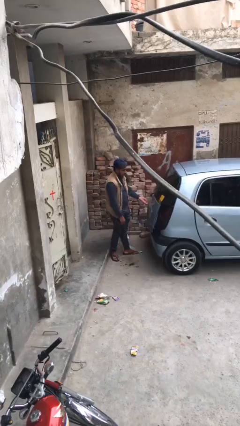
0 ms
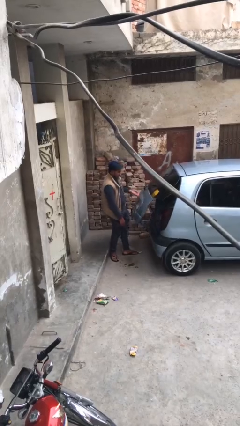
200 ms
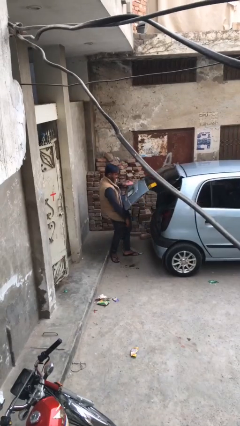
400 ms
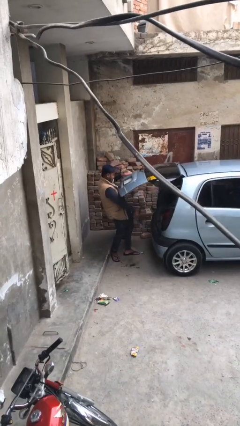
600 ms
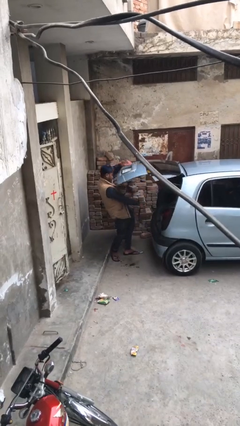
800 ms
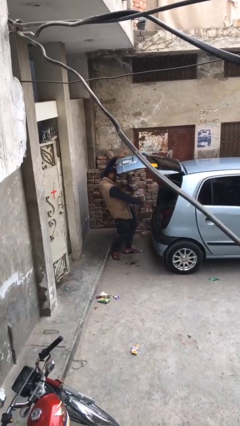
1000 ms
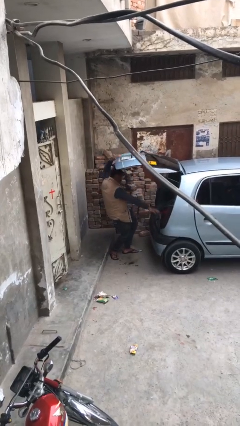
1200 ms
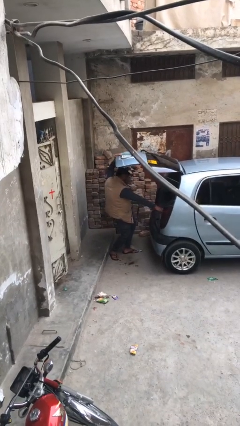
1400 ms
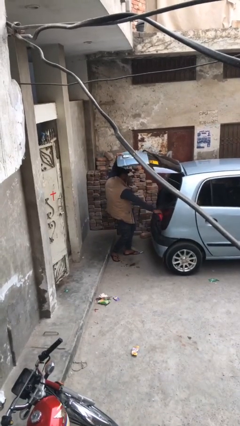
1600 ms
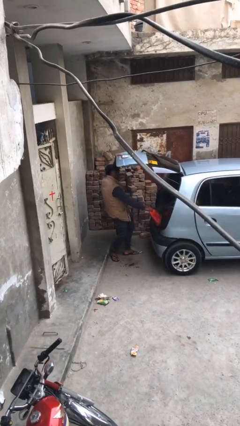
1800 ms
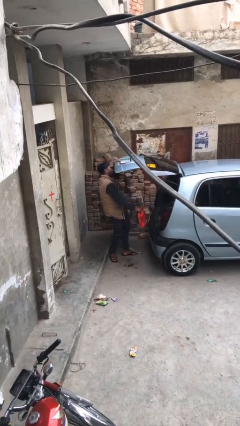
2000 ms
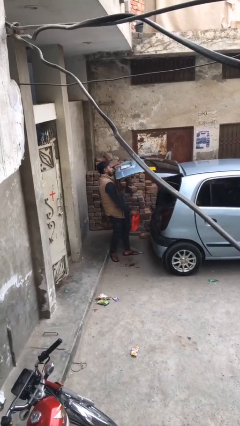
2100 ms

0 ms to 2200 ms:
person unloads car

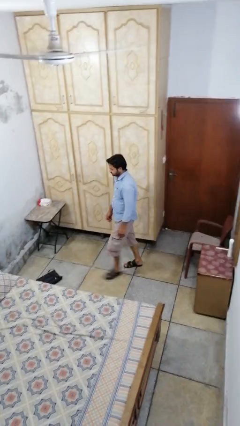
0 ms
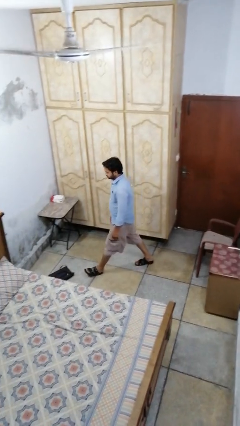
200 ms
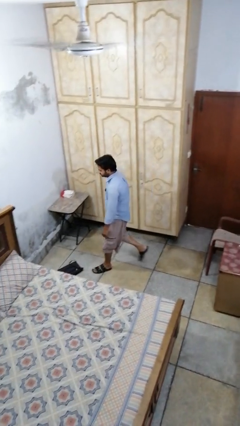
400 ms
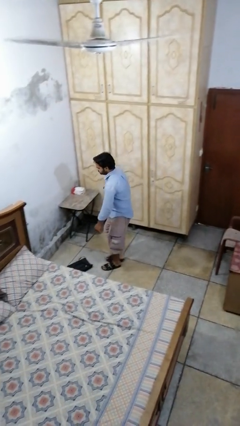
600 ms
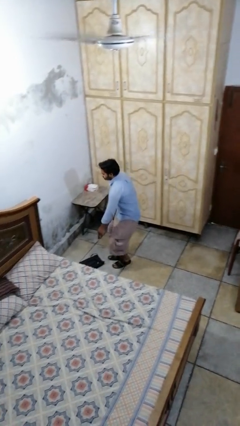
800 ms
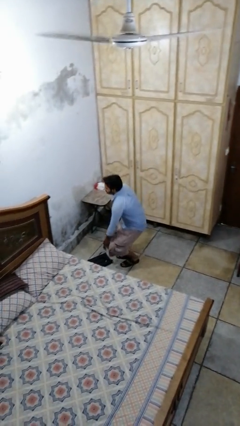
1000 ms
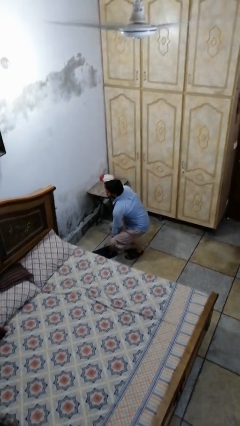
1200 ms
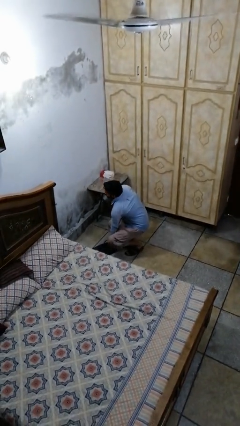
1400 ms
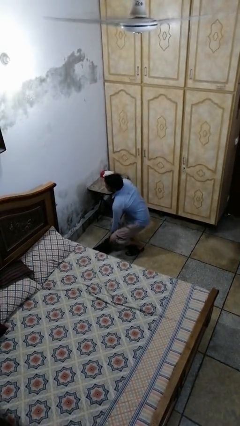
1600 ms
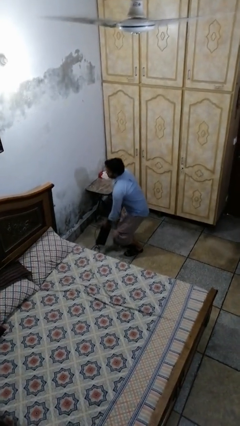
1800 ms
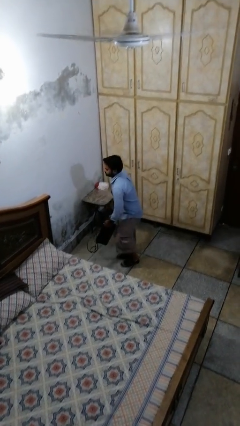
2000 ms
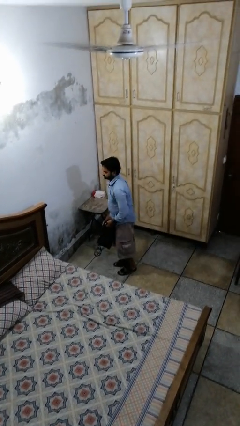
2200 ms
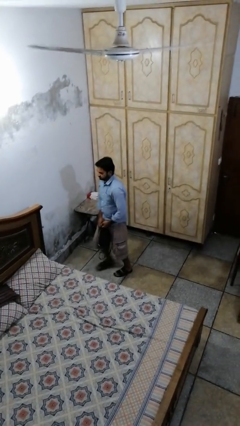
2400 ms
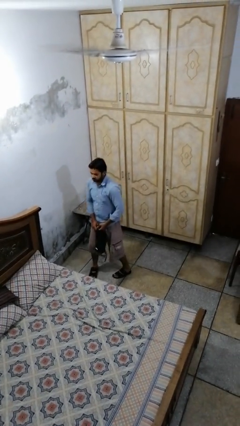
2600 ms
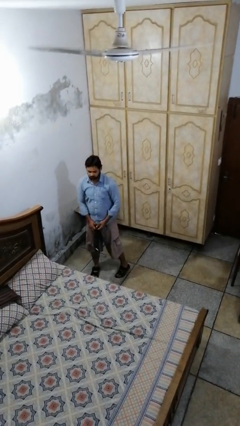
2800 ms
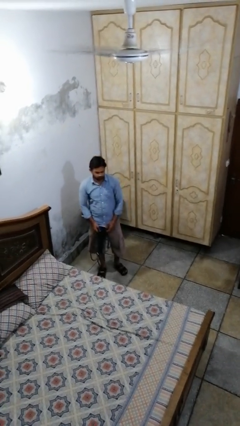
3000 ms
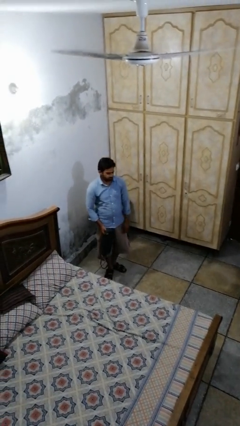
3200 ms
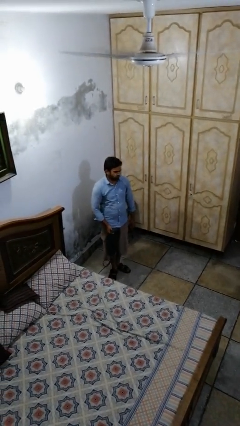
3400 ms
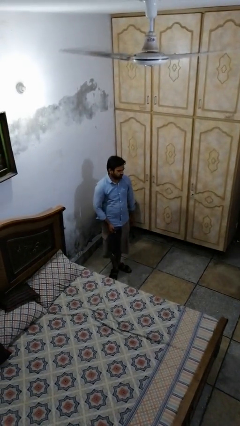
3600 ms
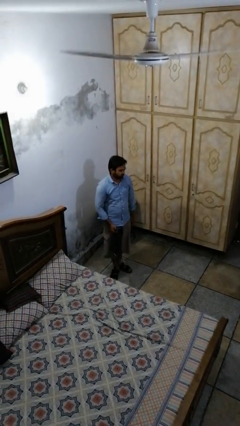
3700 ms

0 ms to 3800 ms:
person picks up object from floor

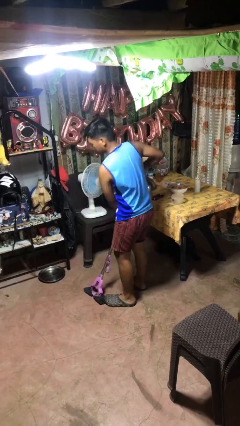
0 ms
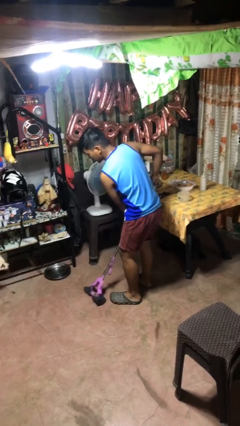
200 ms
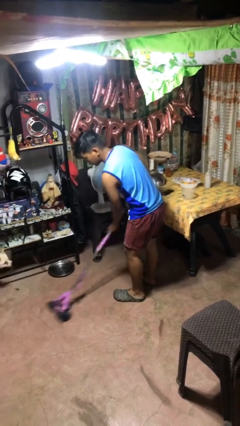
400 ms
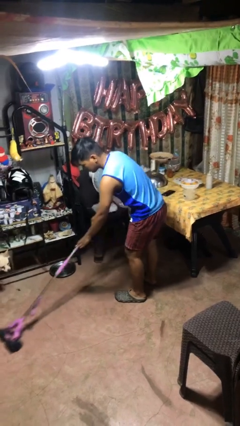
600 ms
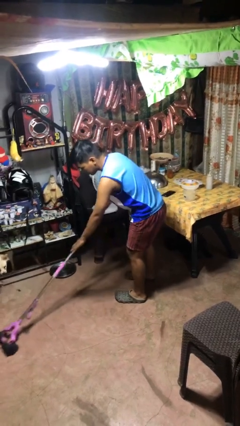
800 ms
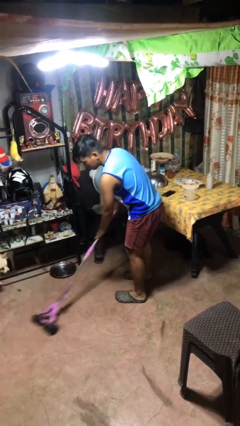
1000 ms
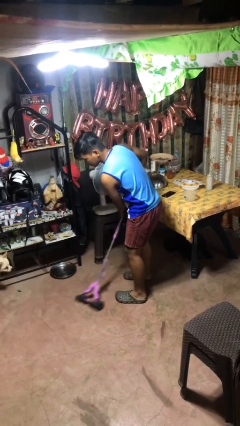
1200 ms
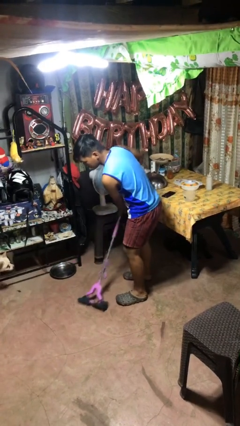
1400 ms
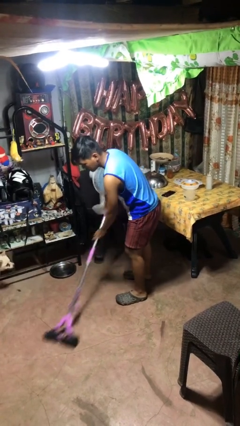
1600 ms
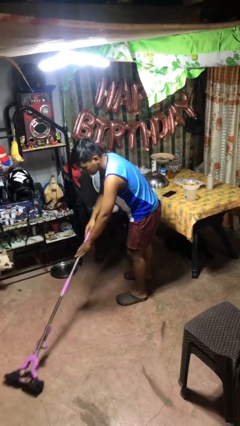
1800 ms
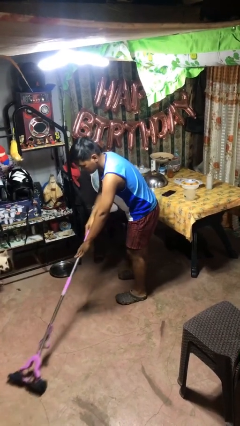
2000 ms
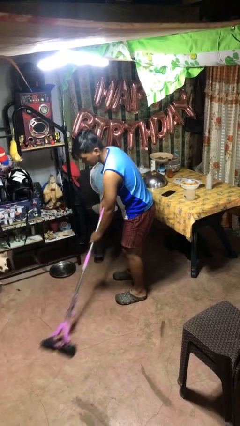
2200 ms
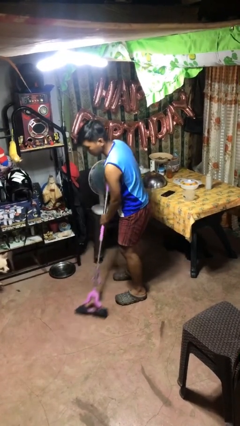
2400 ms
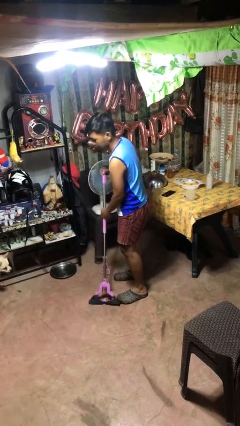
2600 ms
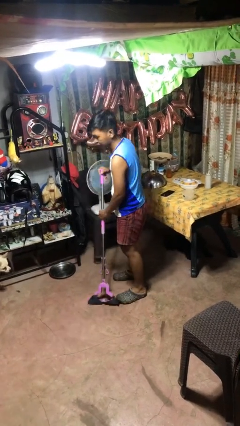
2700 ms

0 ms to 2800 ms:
person mops

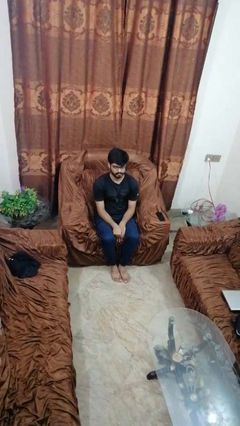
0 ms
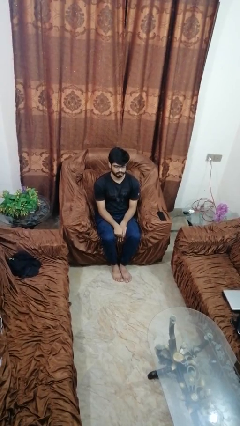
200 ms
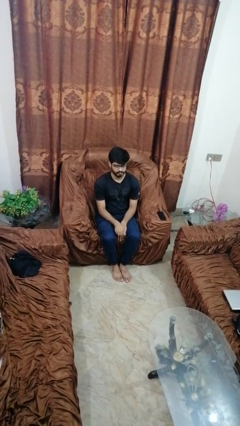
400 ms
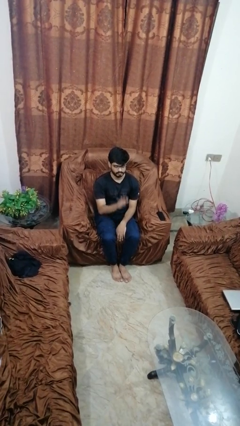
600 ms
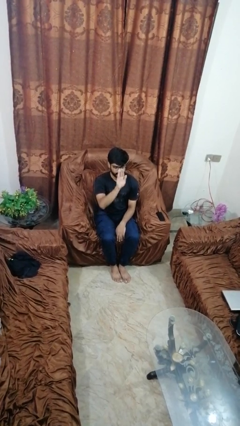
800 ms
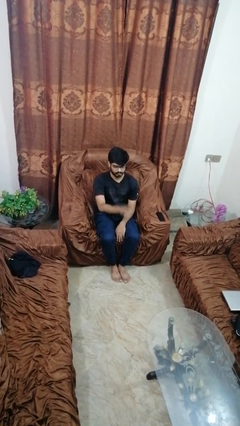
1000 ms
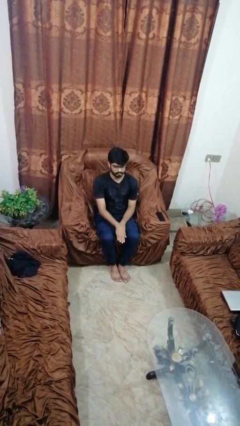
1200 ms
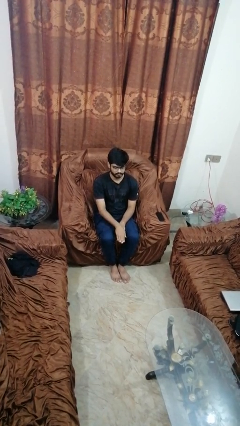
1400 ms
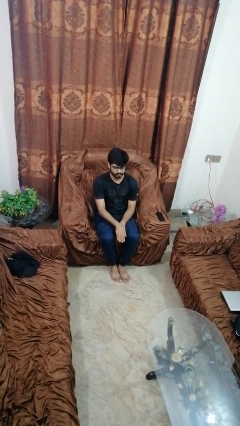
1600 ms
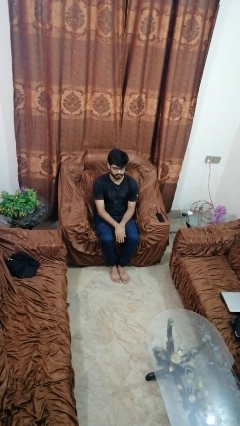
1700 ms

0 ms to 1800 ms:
person gestures swipe down

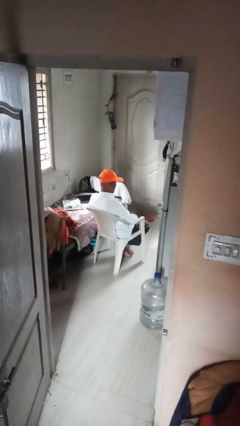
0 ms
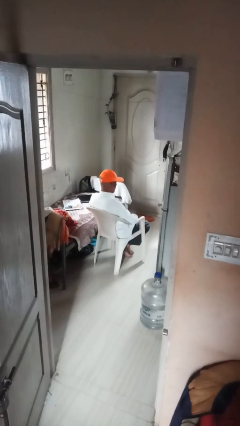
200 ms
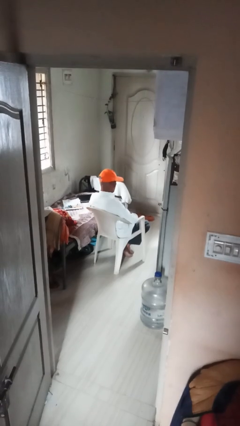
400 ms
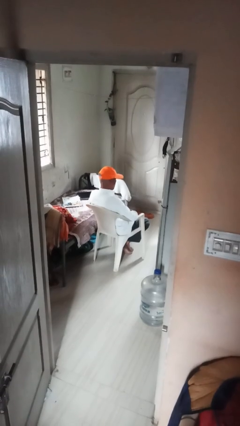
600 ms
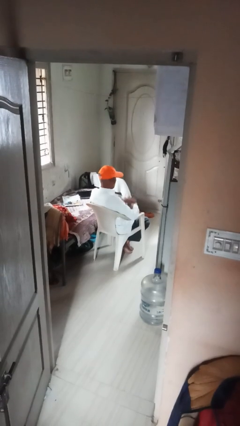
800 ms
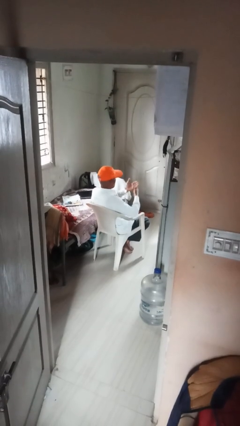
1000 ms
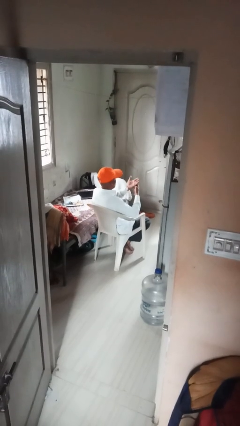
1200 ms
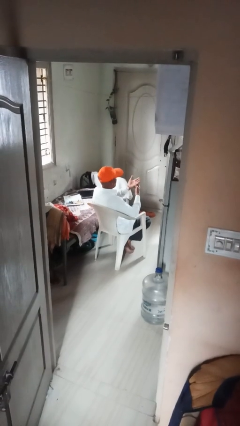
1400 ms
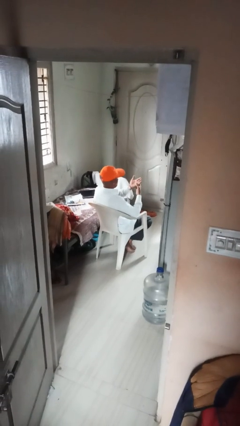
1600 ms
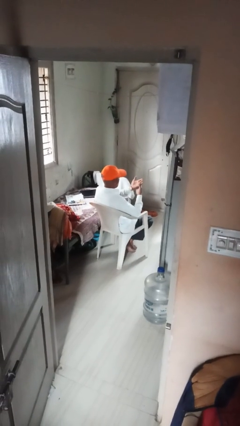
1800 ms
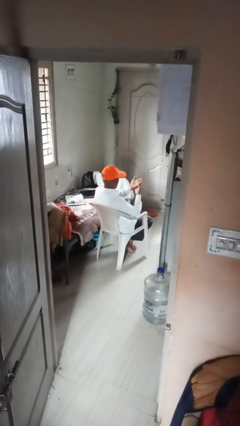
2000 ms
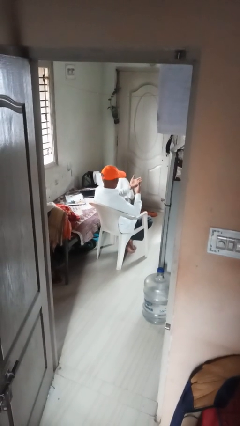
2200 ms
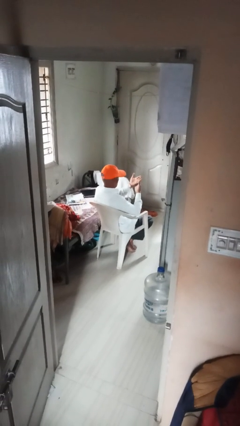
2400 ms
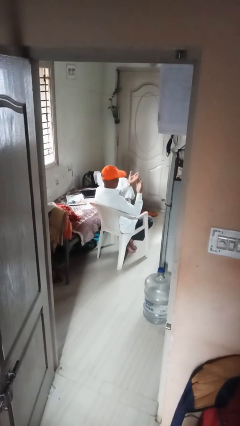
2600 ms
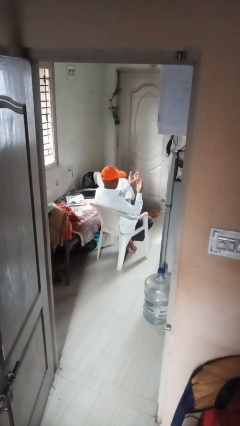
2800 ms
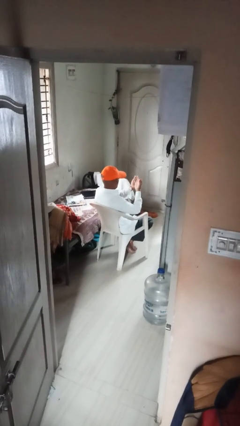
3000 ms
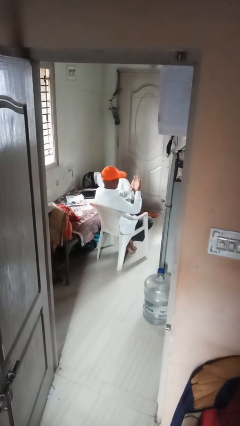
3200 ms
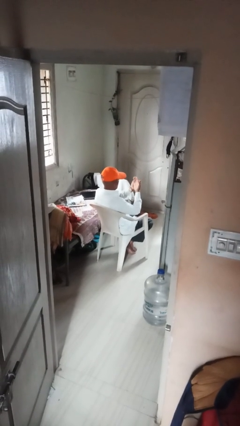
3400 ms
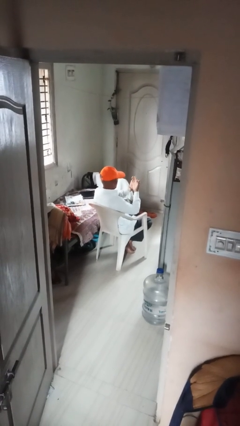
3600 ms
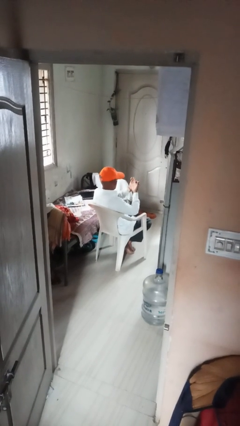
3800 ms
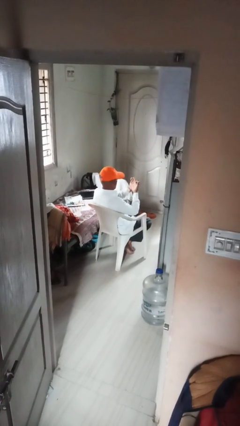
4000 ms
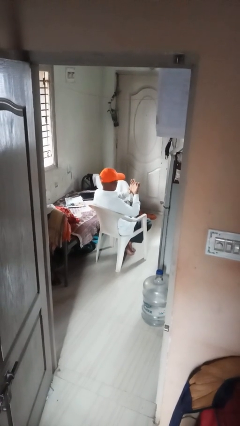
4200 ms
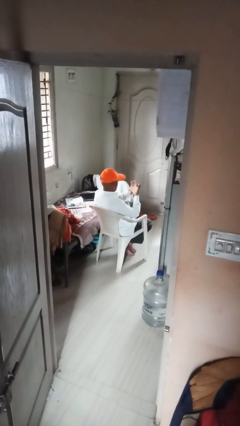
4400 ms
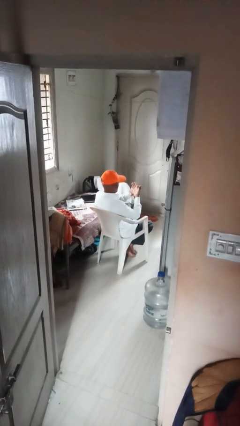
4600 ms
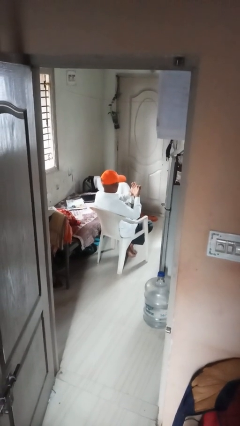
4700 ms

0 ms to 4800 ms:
person looks at hands in lap

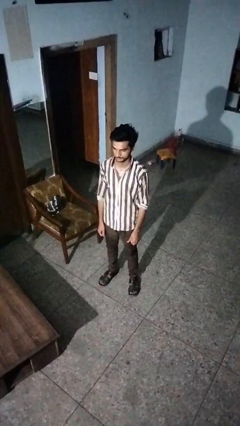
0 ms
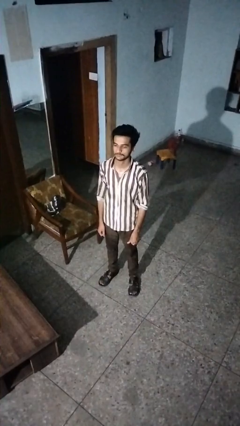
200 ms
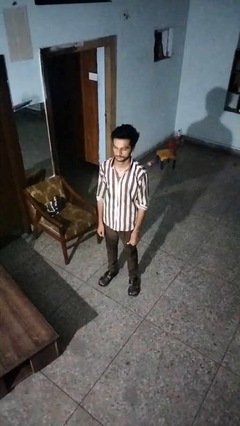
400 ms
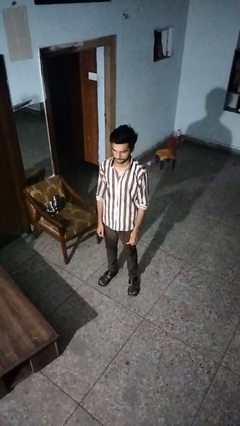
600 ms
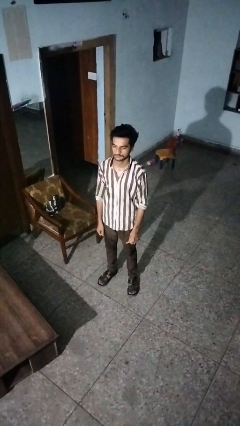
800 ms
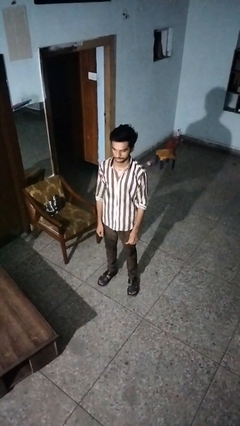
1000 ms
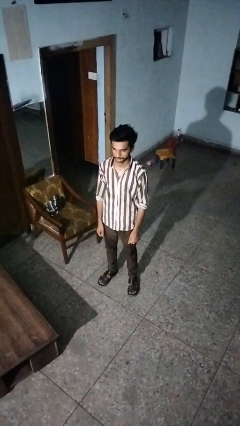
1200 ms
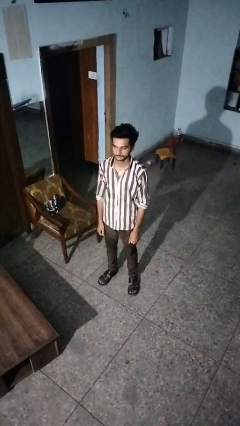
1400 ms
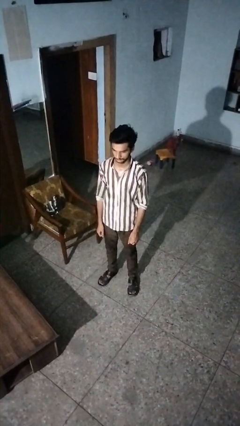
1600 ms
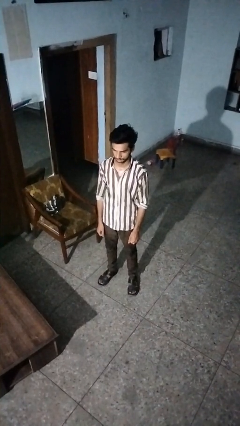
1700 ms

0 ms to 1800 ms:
person nods head
